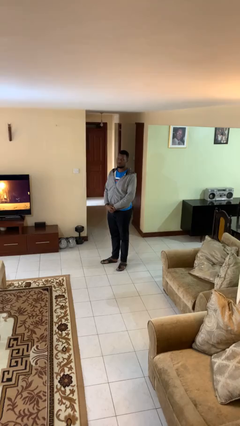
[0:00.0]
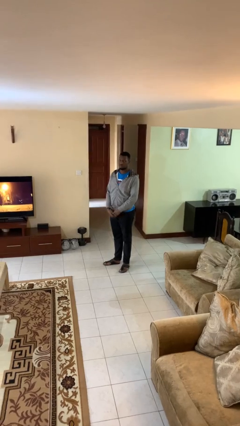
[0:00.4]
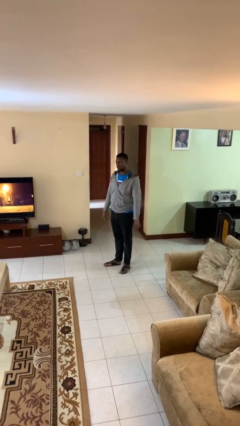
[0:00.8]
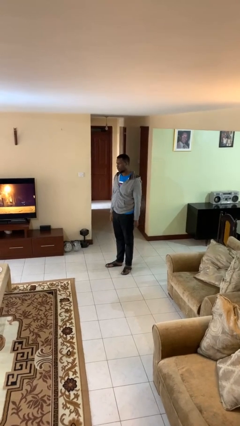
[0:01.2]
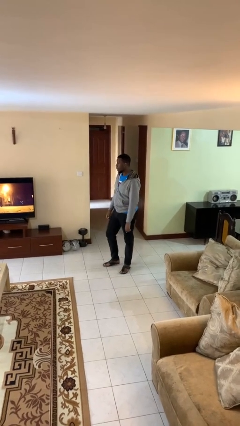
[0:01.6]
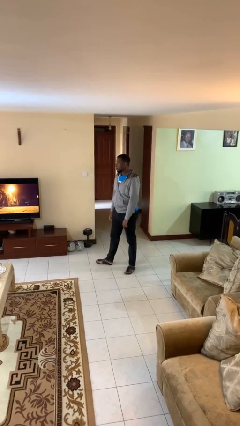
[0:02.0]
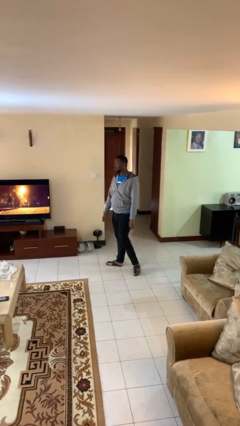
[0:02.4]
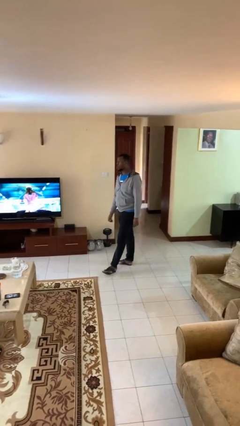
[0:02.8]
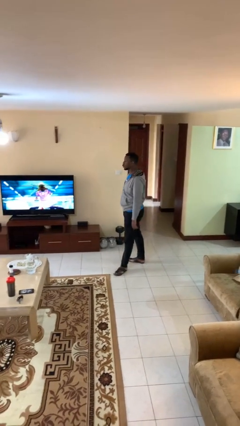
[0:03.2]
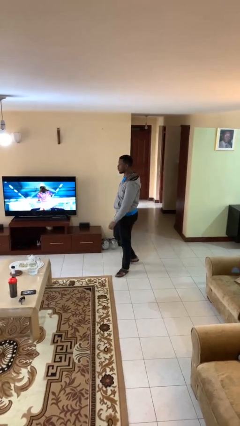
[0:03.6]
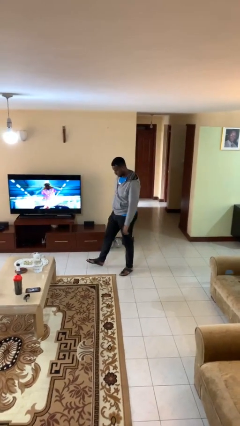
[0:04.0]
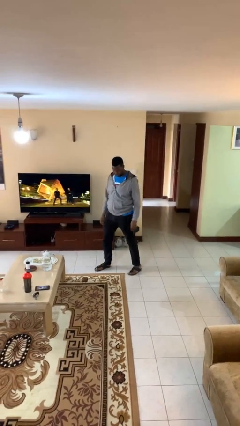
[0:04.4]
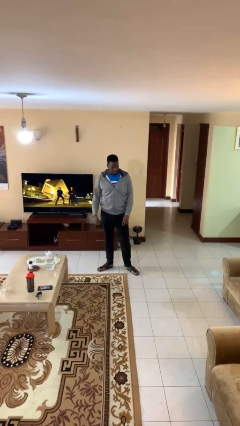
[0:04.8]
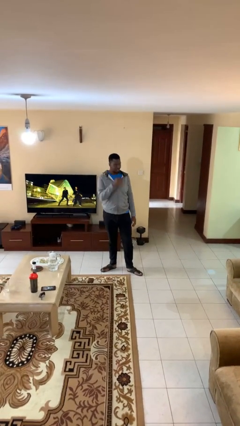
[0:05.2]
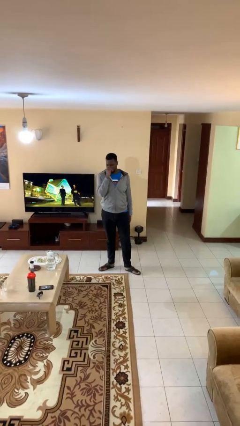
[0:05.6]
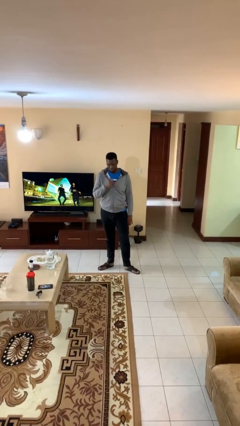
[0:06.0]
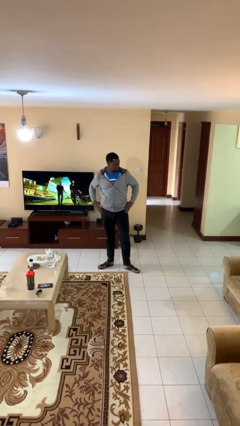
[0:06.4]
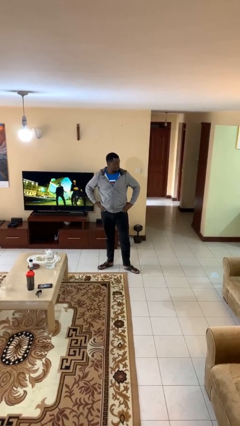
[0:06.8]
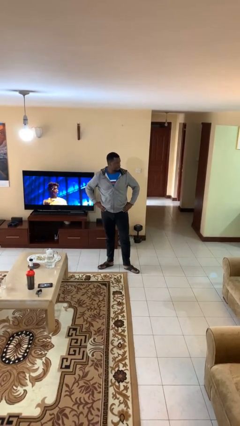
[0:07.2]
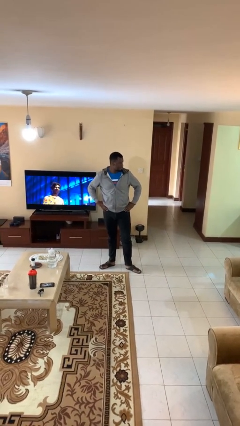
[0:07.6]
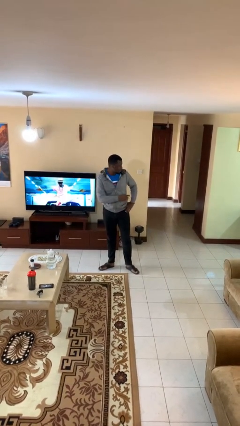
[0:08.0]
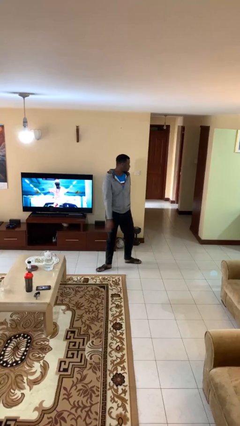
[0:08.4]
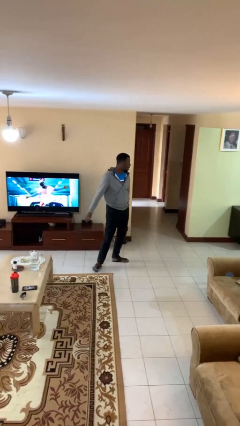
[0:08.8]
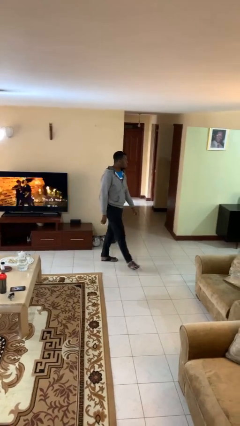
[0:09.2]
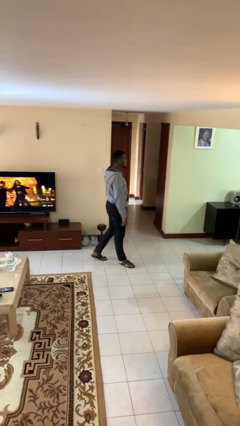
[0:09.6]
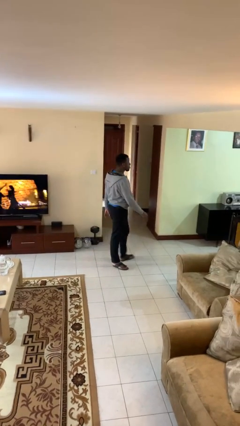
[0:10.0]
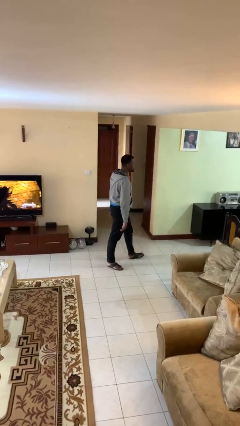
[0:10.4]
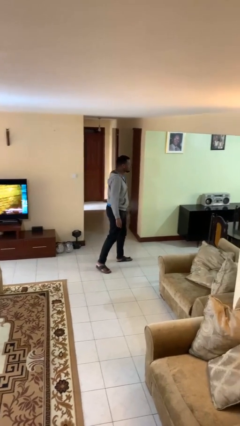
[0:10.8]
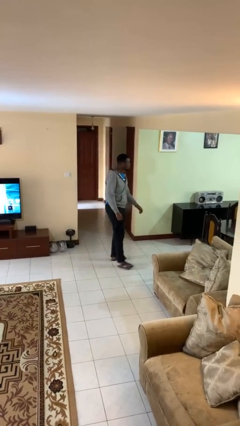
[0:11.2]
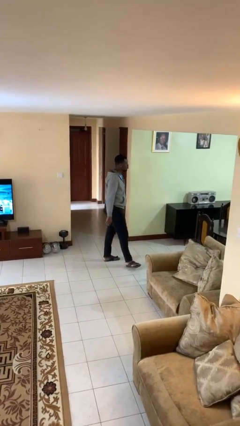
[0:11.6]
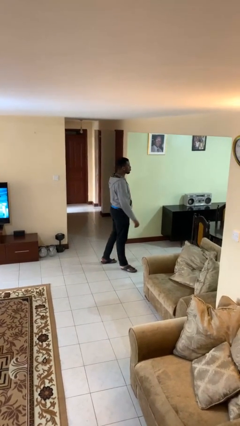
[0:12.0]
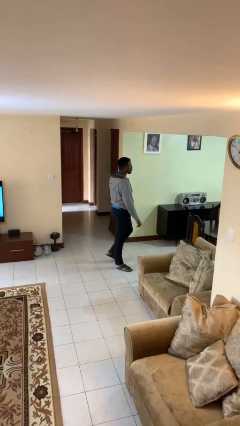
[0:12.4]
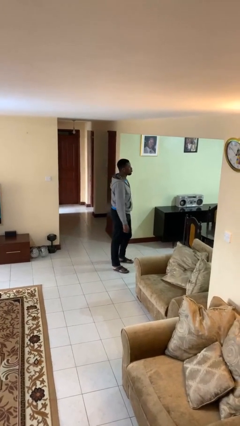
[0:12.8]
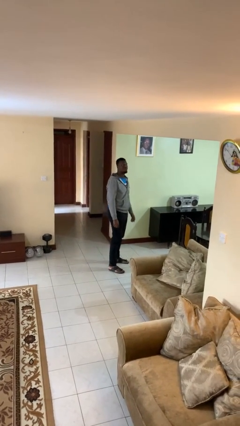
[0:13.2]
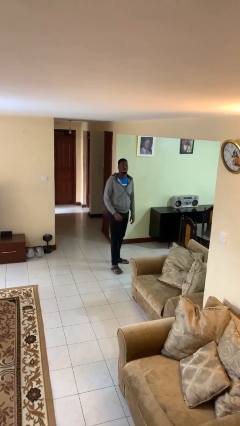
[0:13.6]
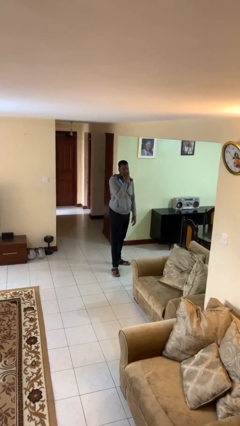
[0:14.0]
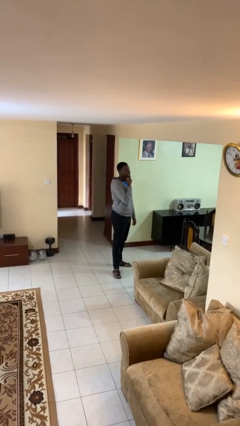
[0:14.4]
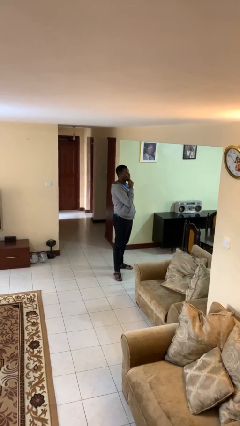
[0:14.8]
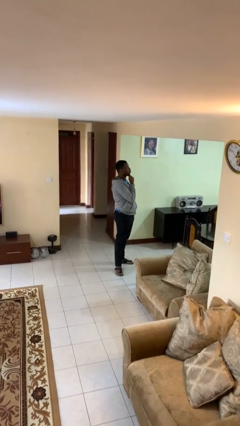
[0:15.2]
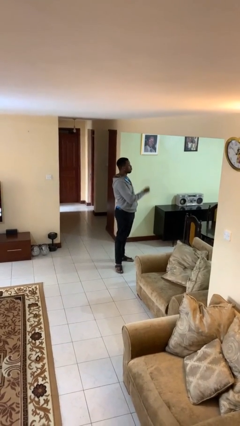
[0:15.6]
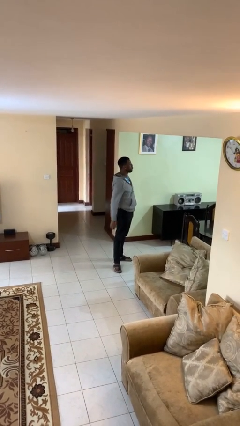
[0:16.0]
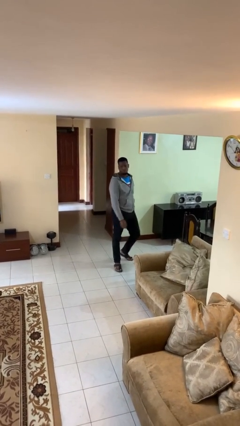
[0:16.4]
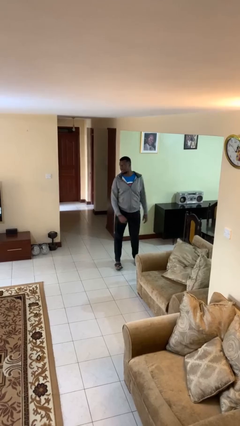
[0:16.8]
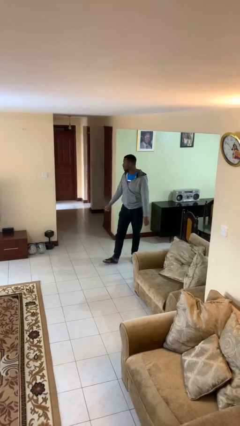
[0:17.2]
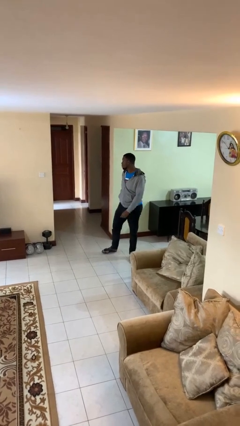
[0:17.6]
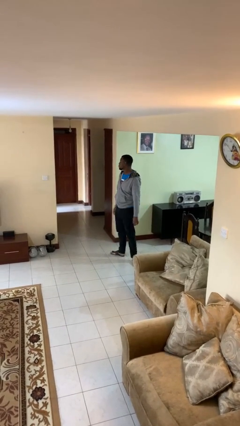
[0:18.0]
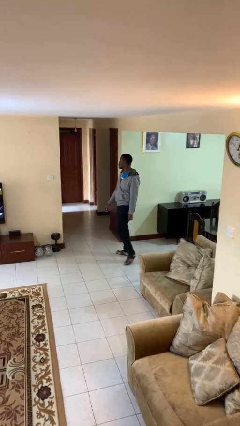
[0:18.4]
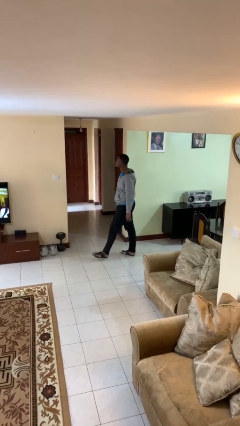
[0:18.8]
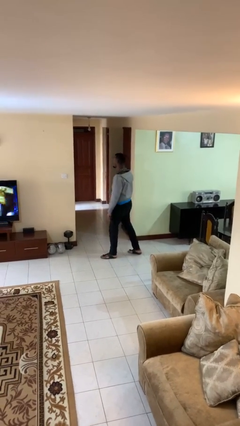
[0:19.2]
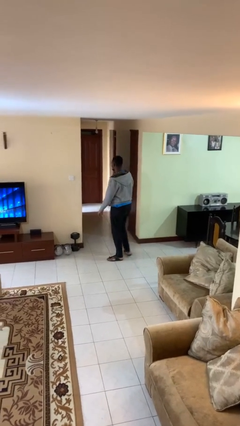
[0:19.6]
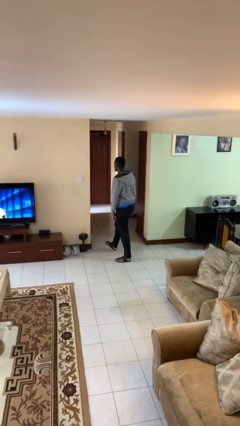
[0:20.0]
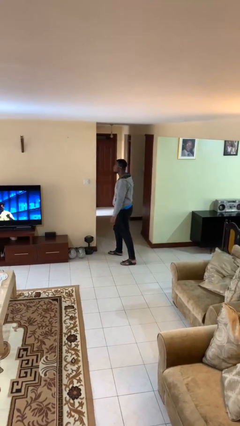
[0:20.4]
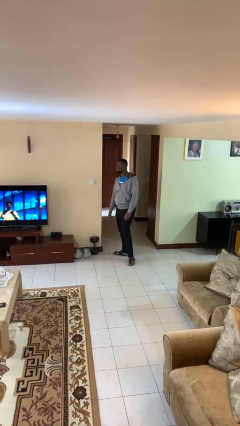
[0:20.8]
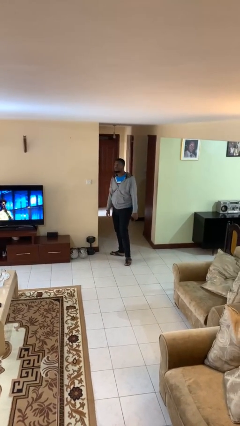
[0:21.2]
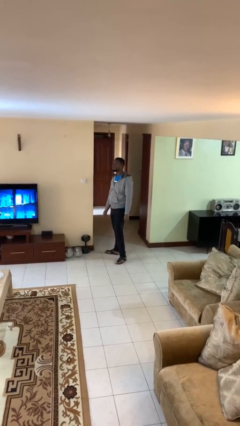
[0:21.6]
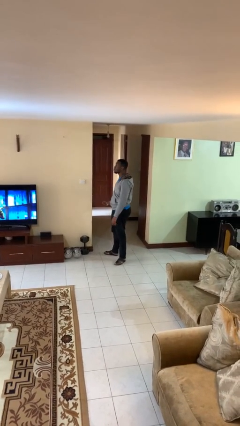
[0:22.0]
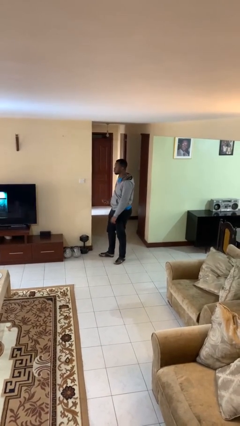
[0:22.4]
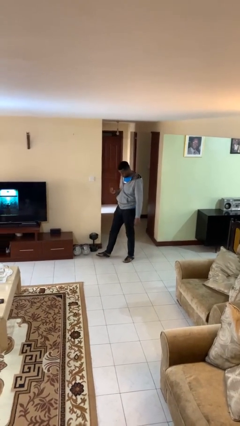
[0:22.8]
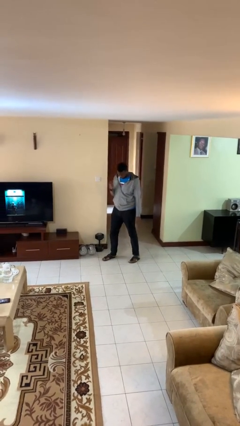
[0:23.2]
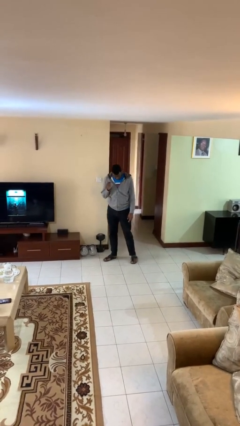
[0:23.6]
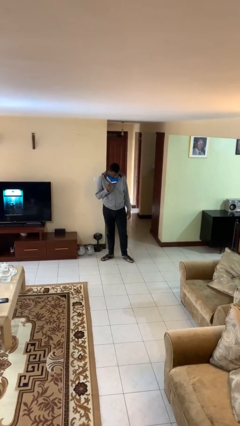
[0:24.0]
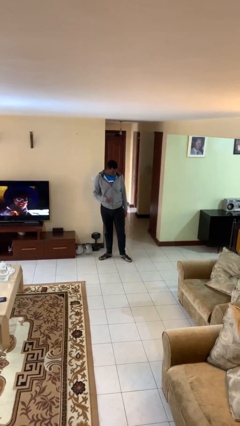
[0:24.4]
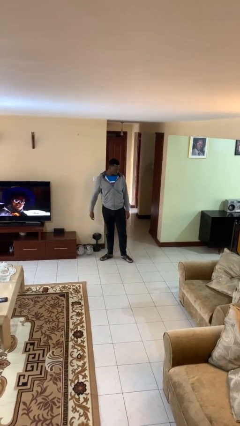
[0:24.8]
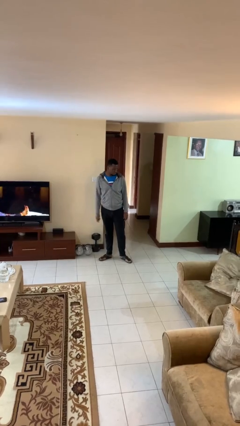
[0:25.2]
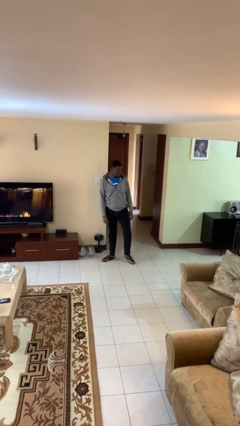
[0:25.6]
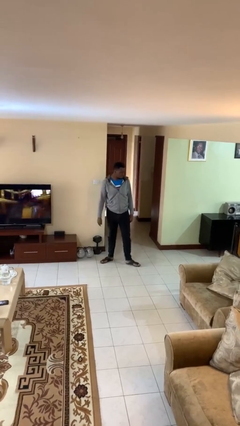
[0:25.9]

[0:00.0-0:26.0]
person walks

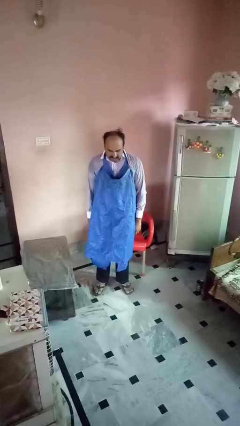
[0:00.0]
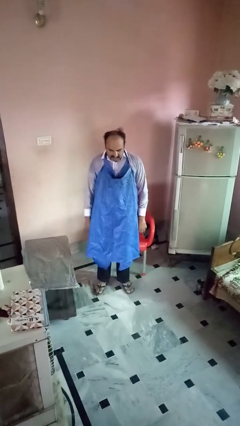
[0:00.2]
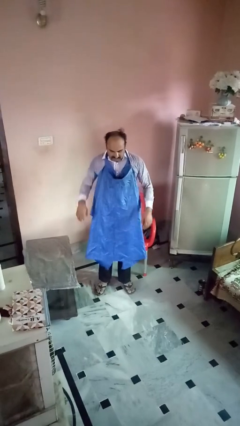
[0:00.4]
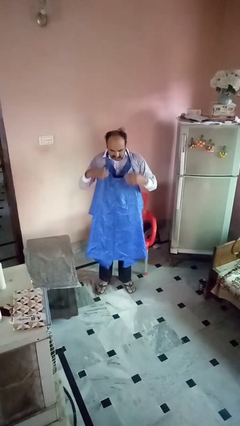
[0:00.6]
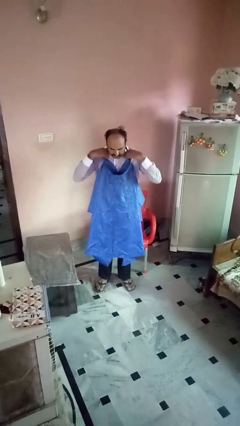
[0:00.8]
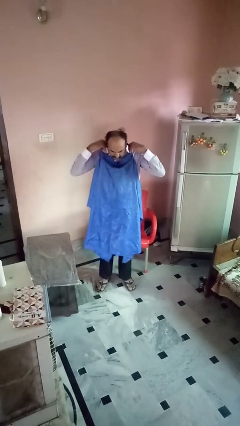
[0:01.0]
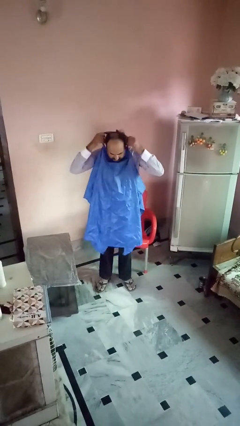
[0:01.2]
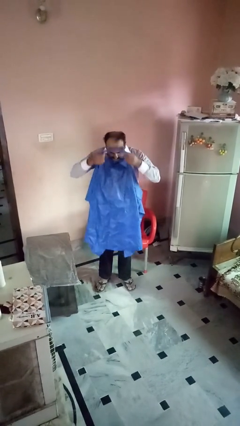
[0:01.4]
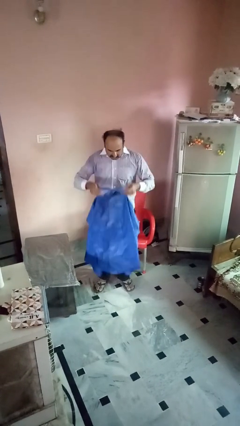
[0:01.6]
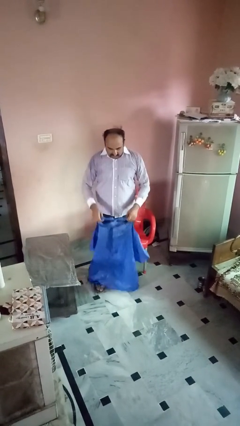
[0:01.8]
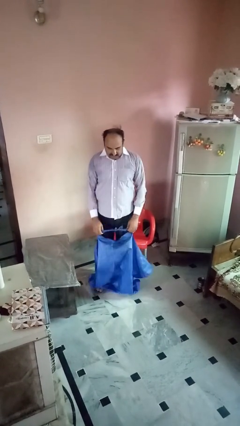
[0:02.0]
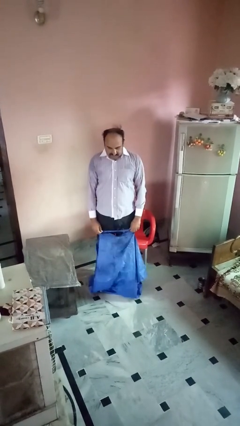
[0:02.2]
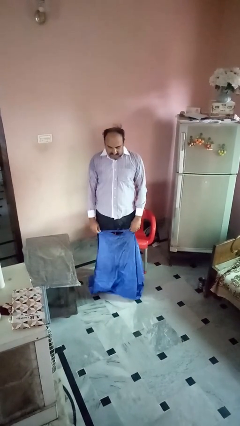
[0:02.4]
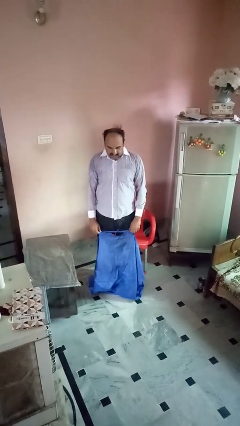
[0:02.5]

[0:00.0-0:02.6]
person takes off apron

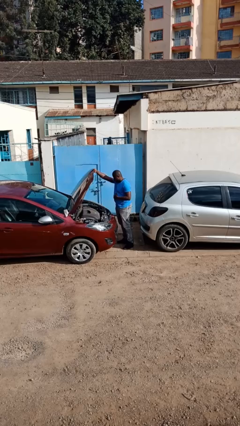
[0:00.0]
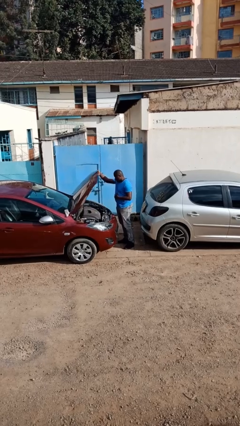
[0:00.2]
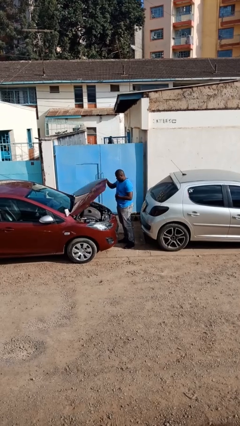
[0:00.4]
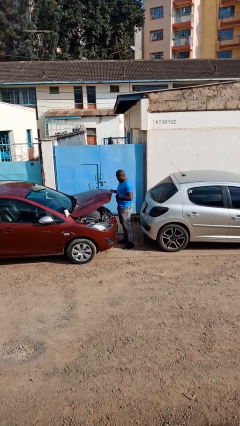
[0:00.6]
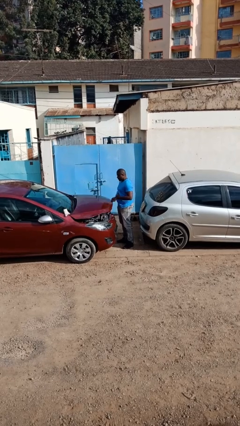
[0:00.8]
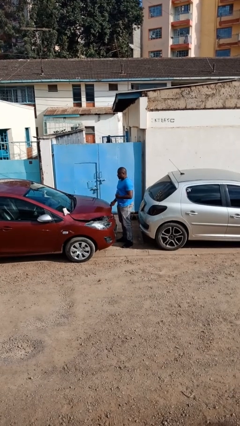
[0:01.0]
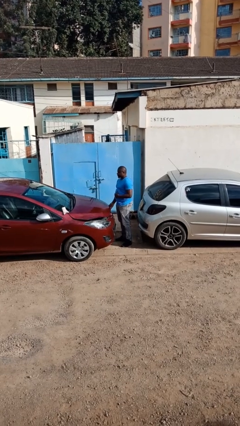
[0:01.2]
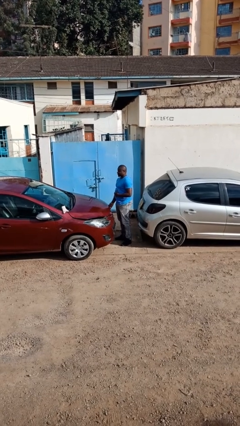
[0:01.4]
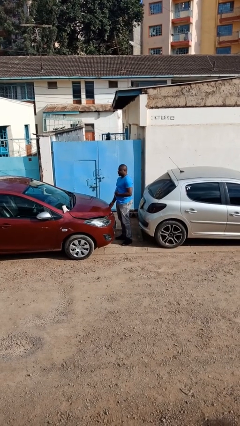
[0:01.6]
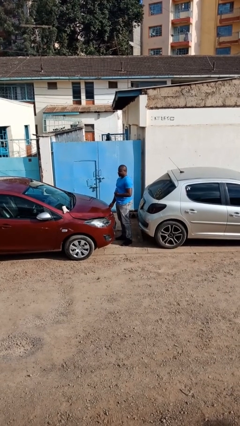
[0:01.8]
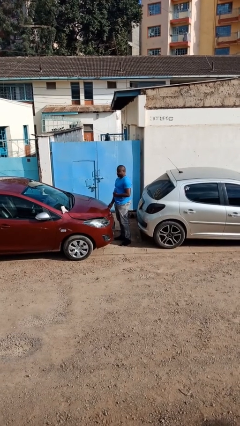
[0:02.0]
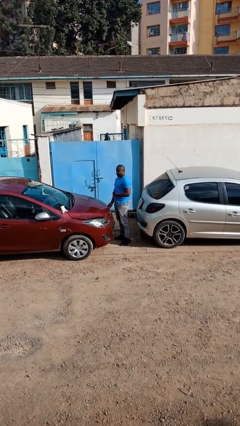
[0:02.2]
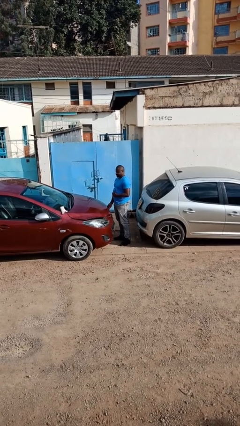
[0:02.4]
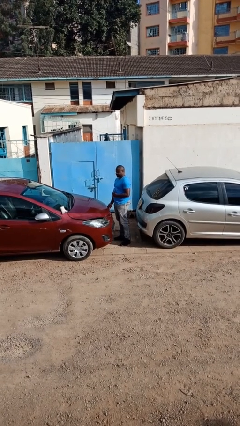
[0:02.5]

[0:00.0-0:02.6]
person closes car hood
